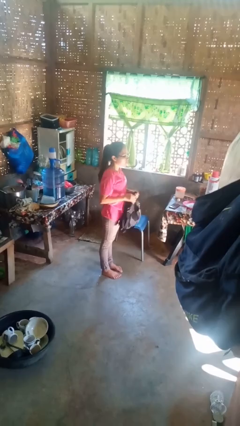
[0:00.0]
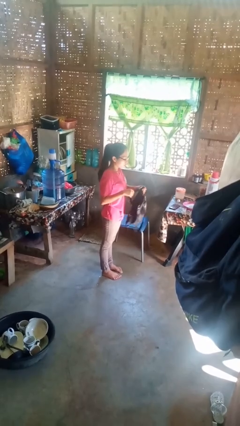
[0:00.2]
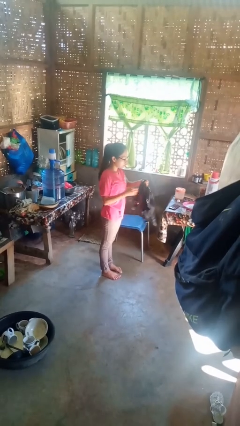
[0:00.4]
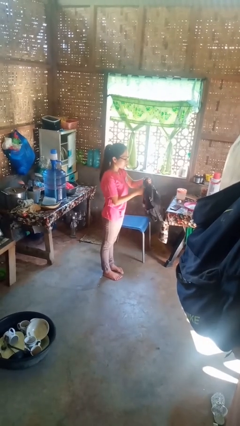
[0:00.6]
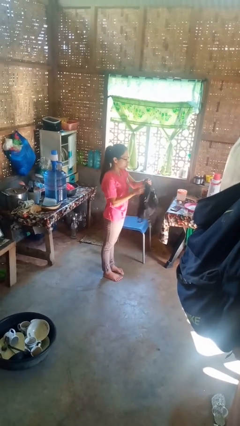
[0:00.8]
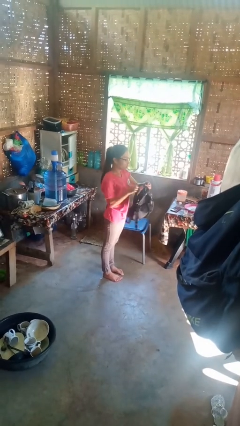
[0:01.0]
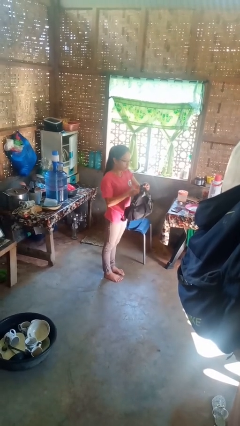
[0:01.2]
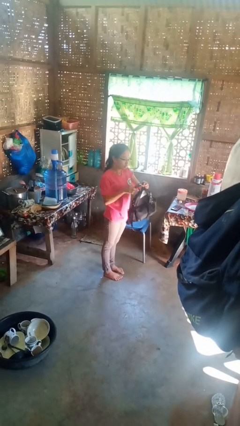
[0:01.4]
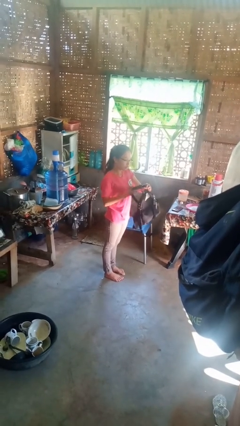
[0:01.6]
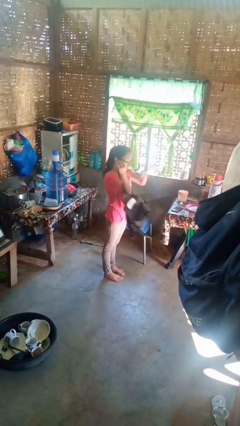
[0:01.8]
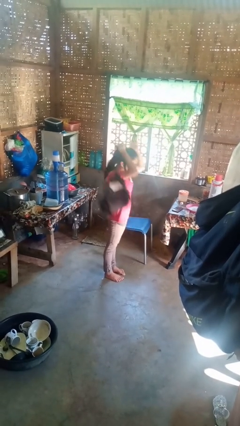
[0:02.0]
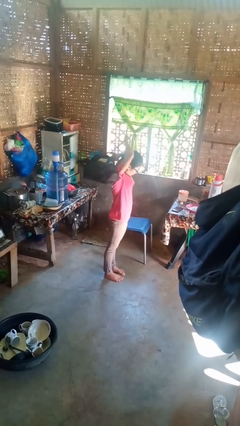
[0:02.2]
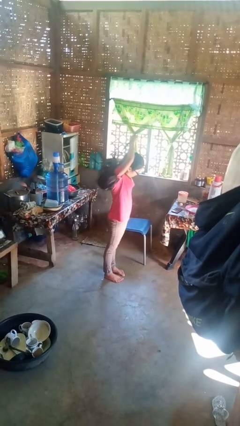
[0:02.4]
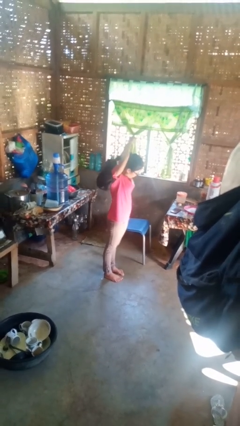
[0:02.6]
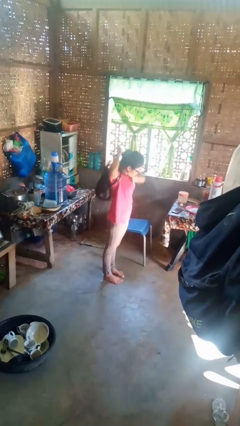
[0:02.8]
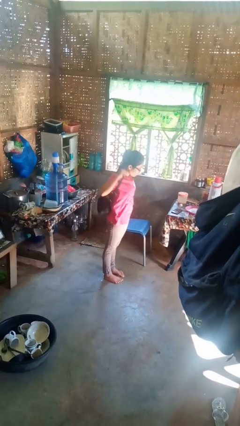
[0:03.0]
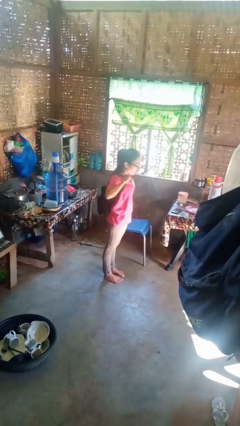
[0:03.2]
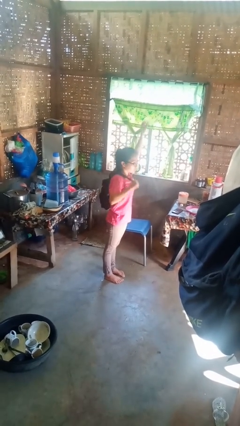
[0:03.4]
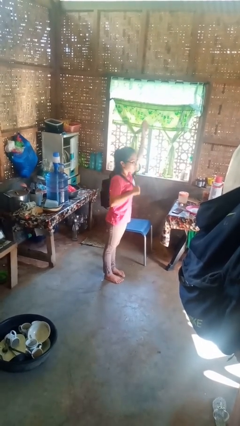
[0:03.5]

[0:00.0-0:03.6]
person puts on backpack

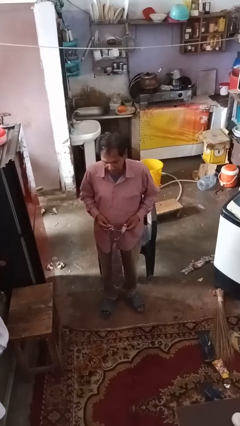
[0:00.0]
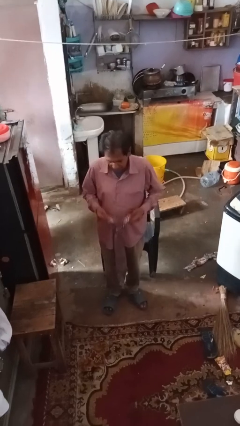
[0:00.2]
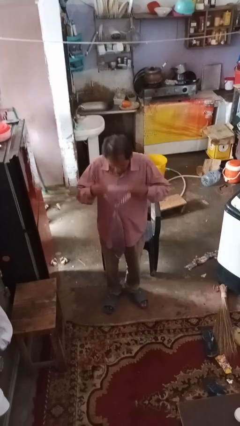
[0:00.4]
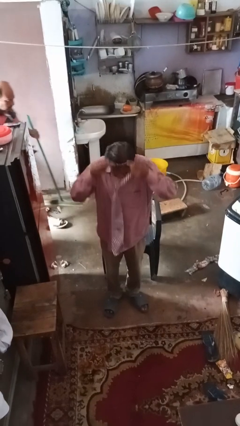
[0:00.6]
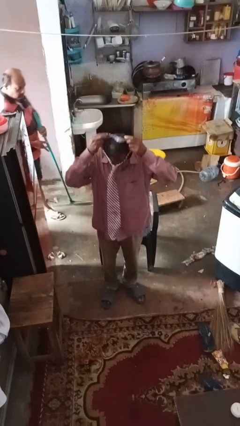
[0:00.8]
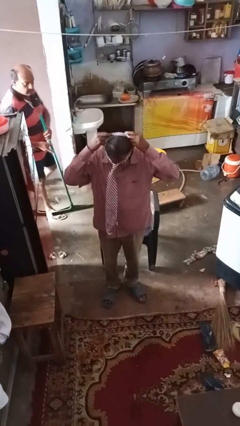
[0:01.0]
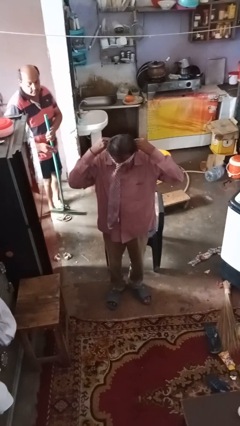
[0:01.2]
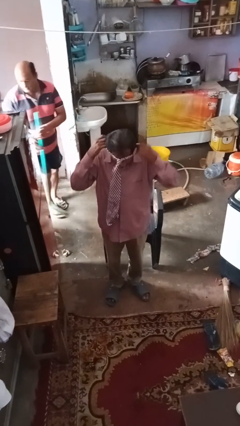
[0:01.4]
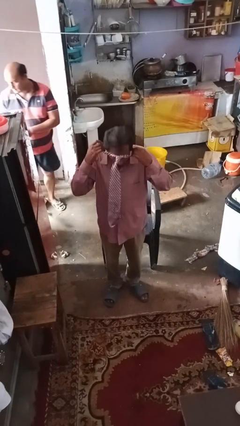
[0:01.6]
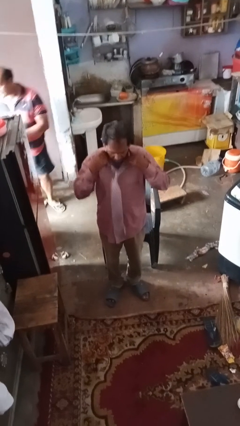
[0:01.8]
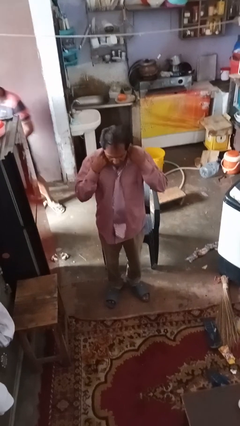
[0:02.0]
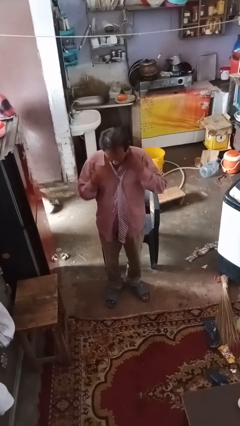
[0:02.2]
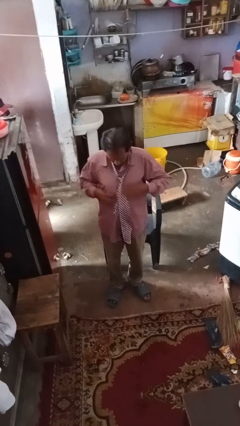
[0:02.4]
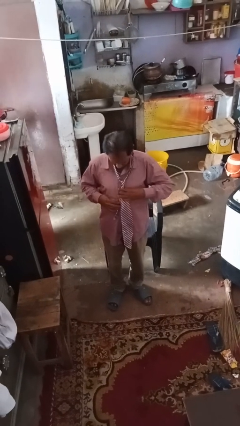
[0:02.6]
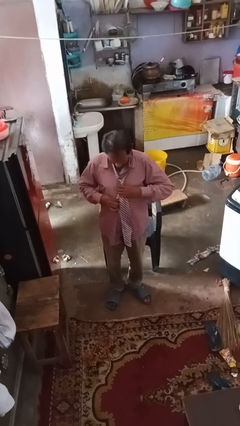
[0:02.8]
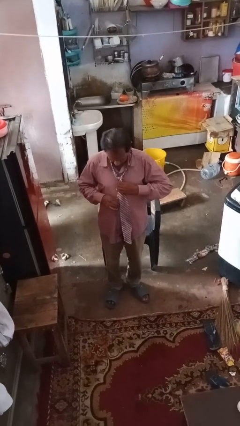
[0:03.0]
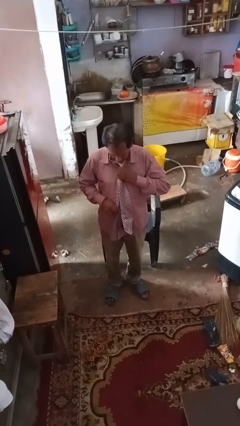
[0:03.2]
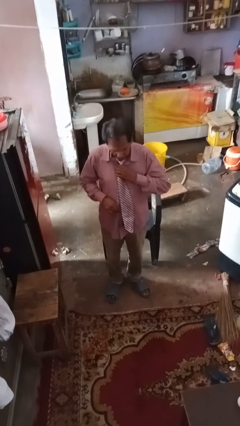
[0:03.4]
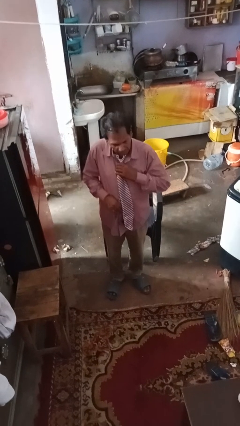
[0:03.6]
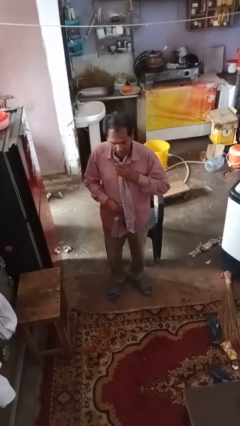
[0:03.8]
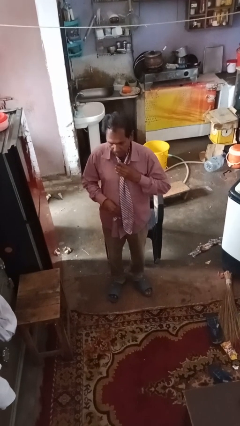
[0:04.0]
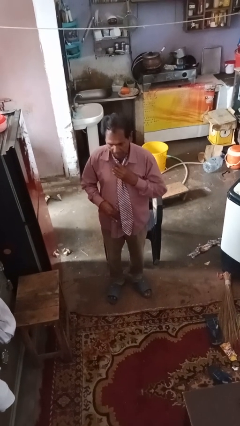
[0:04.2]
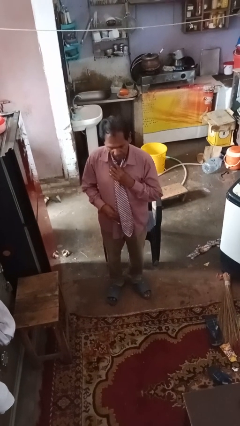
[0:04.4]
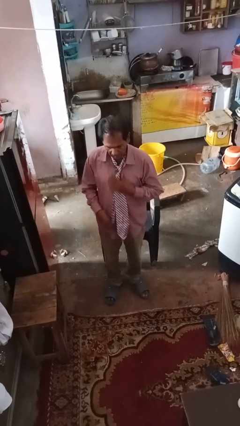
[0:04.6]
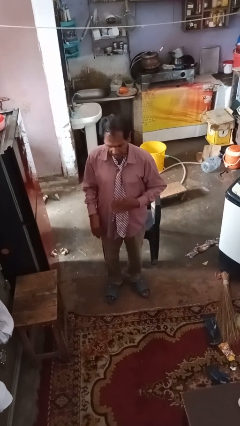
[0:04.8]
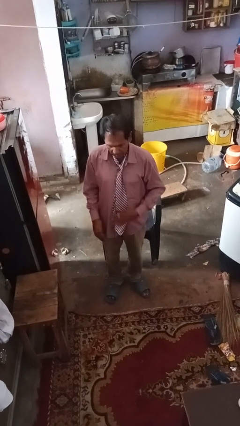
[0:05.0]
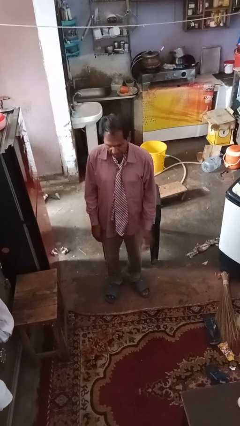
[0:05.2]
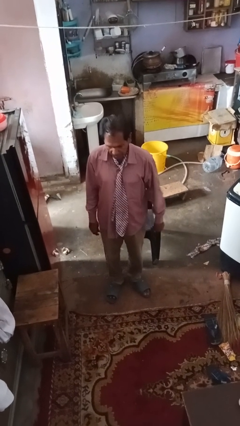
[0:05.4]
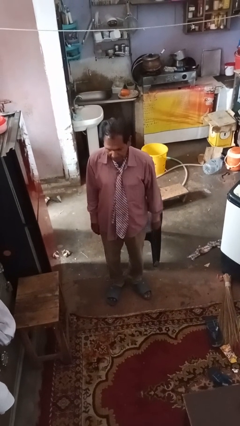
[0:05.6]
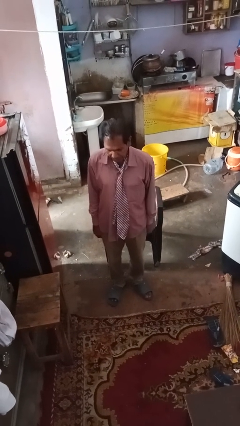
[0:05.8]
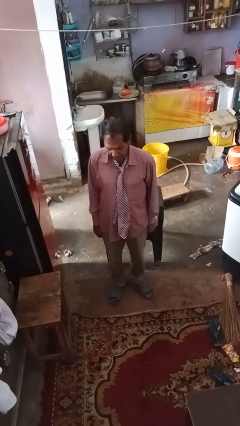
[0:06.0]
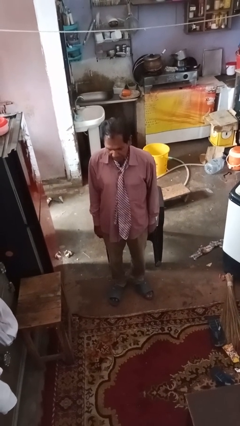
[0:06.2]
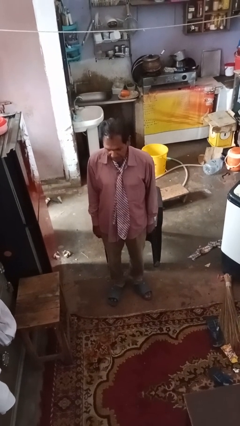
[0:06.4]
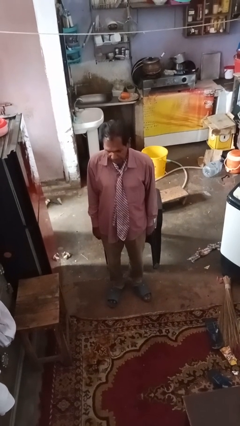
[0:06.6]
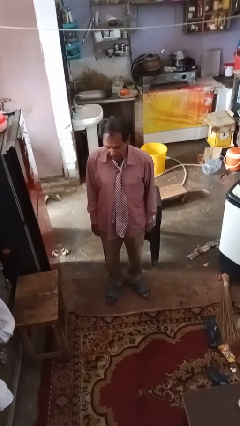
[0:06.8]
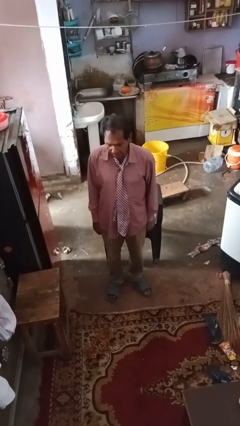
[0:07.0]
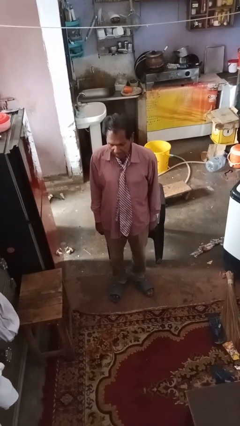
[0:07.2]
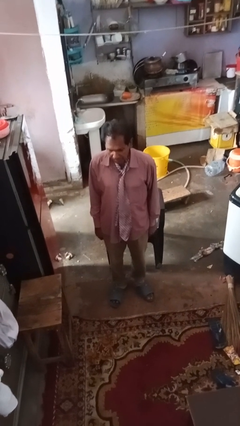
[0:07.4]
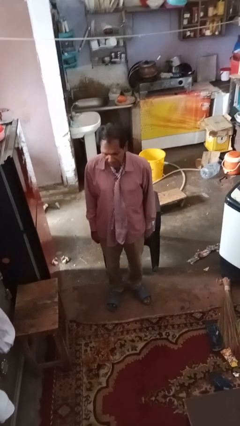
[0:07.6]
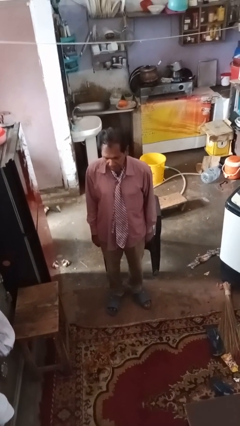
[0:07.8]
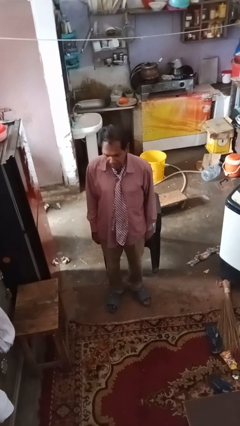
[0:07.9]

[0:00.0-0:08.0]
person puts on necktie

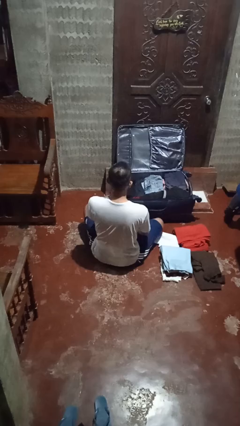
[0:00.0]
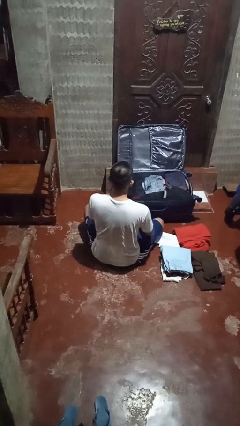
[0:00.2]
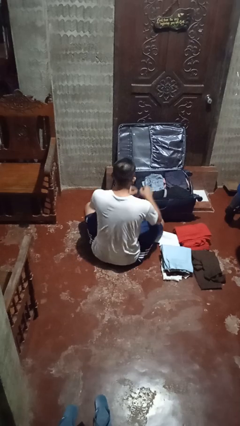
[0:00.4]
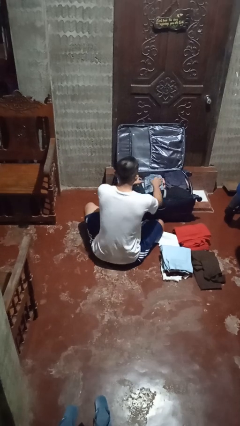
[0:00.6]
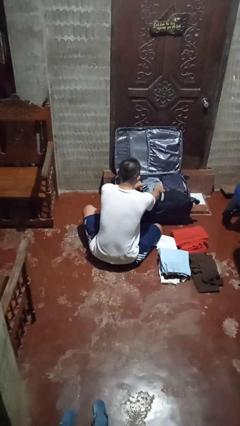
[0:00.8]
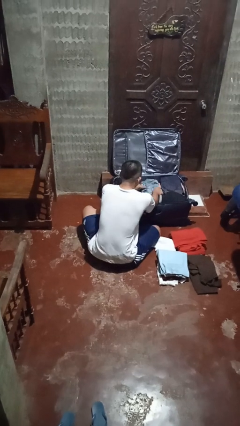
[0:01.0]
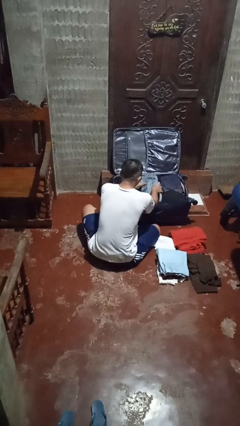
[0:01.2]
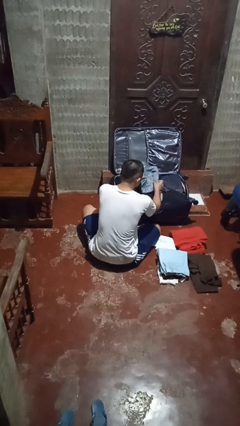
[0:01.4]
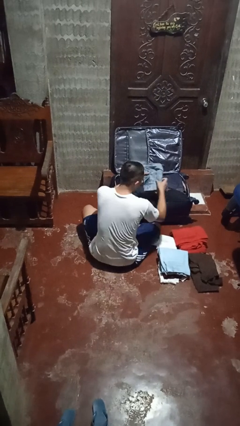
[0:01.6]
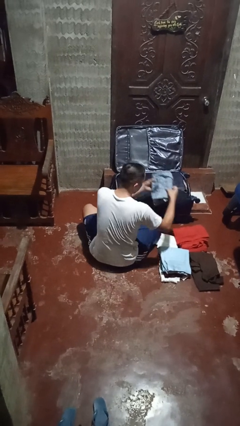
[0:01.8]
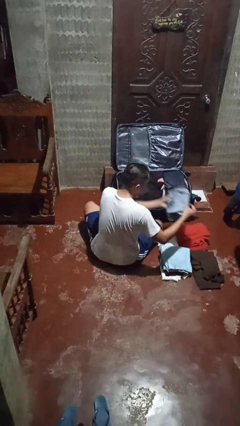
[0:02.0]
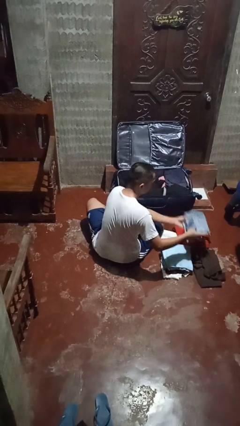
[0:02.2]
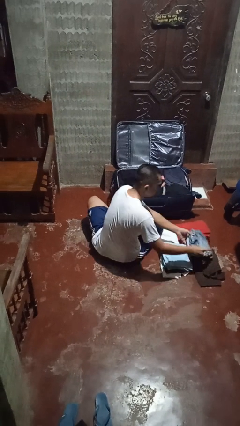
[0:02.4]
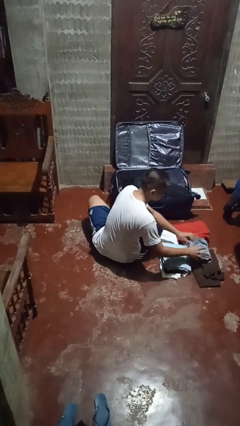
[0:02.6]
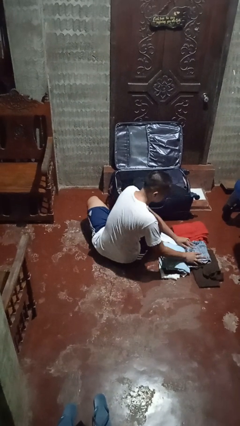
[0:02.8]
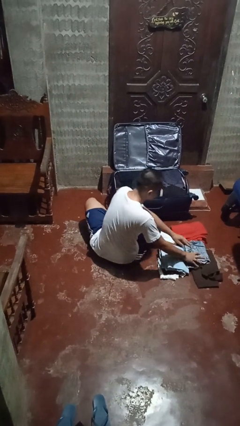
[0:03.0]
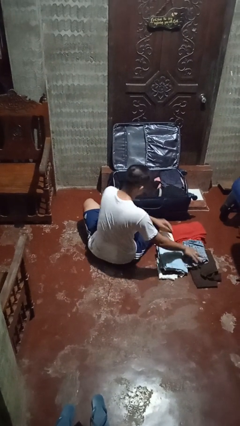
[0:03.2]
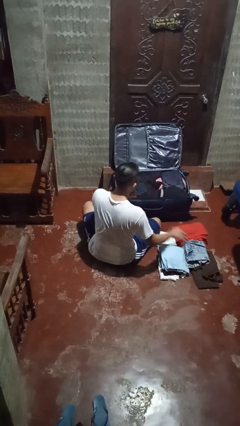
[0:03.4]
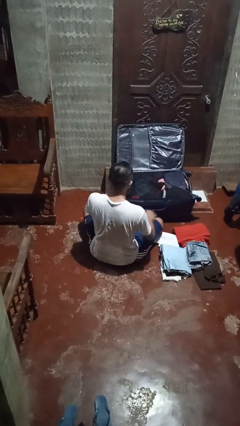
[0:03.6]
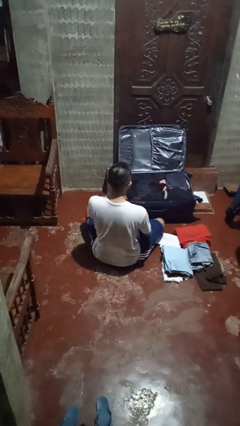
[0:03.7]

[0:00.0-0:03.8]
person unloads clothes from suitcase

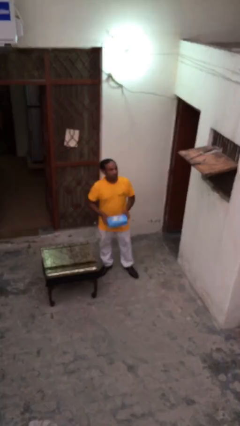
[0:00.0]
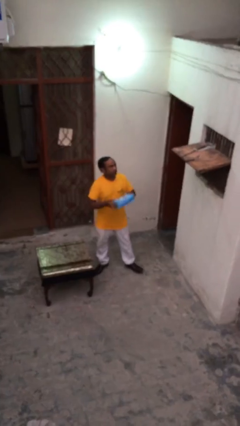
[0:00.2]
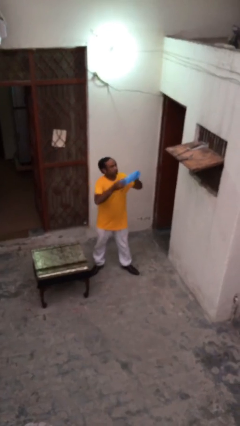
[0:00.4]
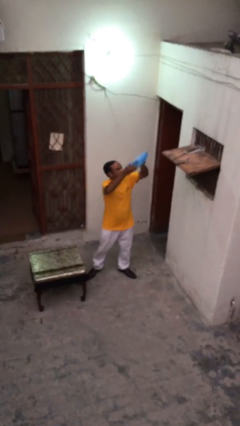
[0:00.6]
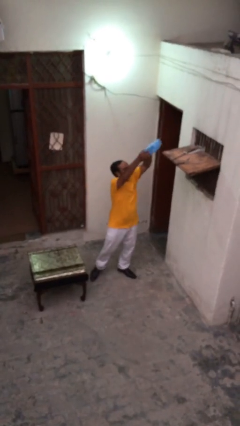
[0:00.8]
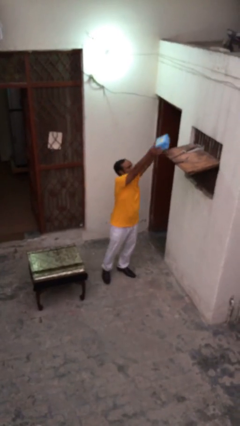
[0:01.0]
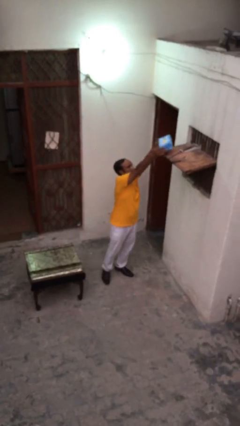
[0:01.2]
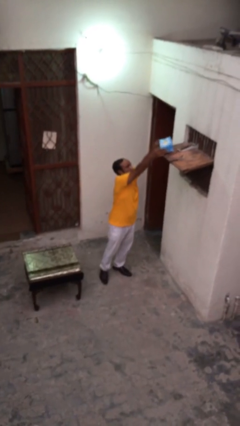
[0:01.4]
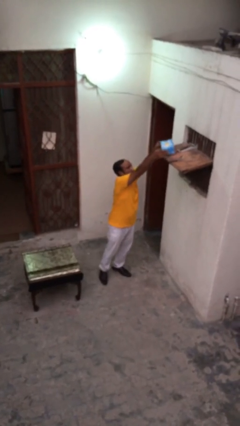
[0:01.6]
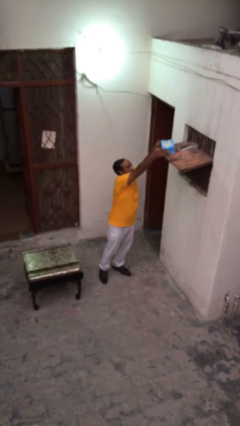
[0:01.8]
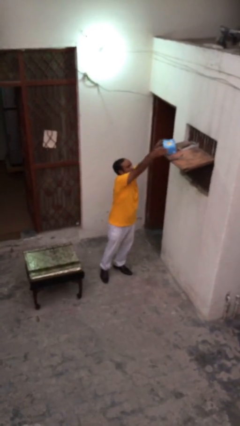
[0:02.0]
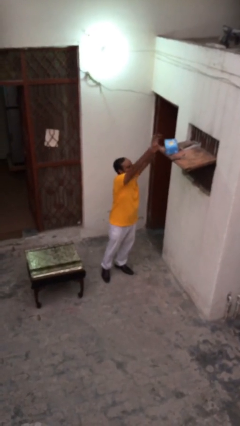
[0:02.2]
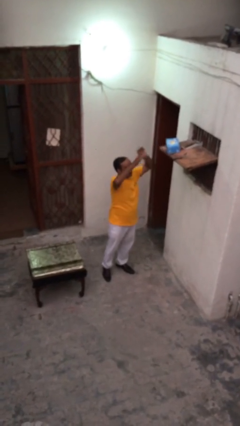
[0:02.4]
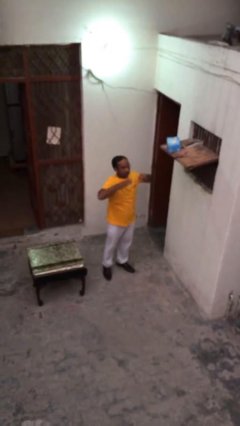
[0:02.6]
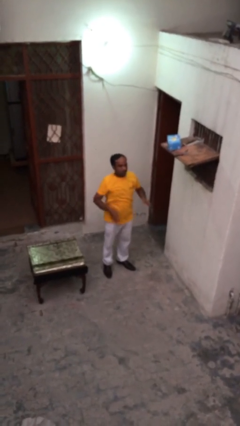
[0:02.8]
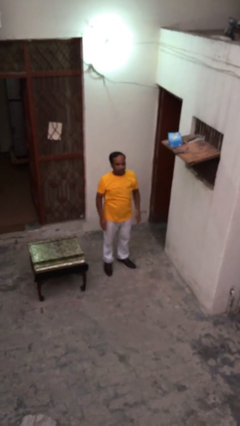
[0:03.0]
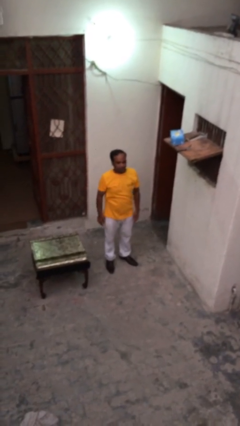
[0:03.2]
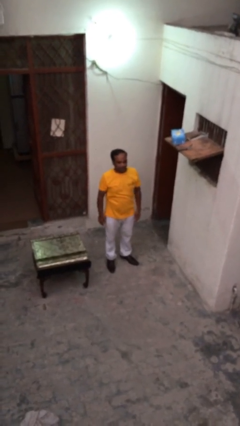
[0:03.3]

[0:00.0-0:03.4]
person puts down object on shelf
